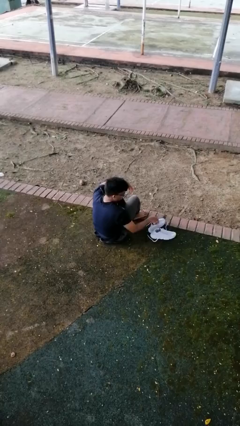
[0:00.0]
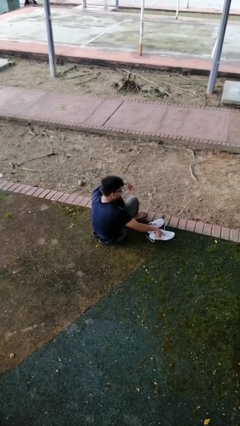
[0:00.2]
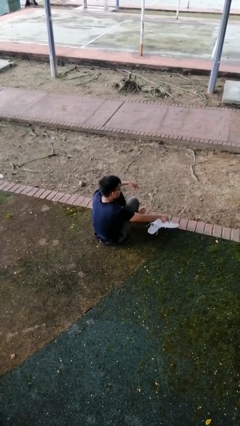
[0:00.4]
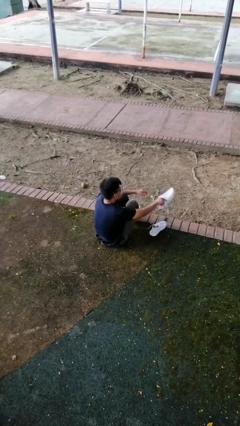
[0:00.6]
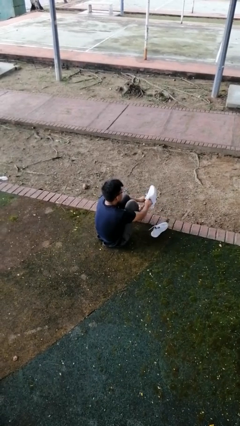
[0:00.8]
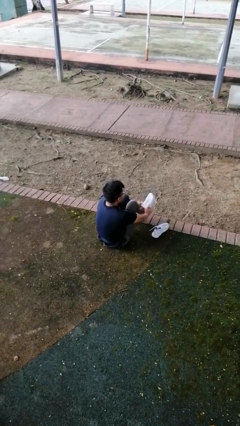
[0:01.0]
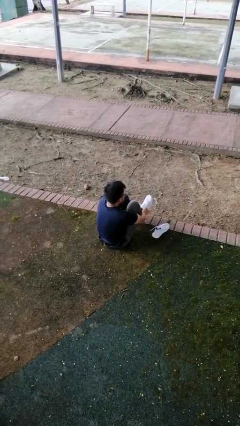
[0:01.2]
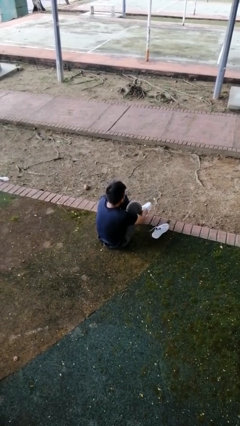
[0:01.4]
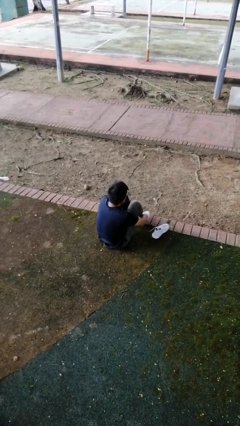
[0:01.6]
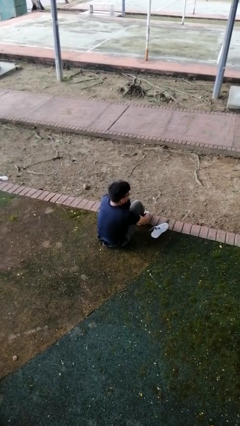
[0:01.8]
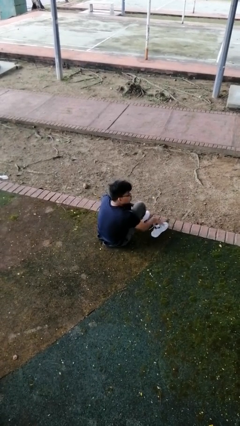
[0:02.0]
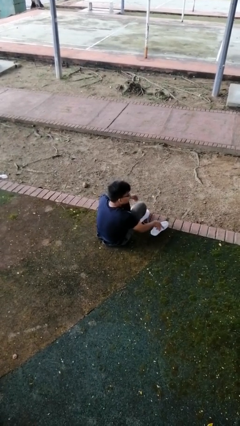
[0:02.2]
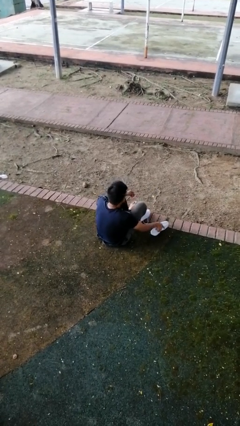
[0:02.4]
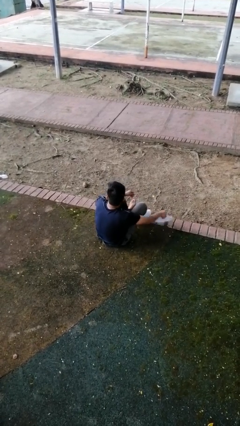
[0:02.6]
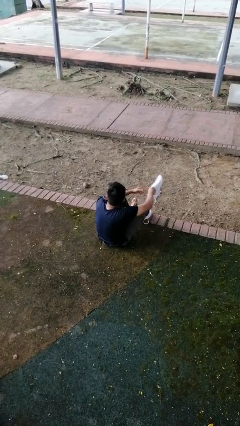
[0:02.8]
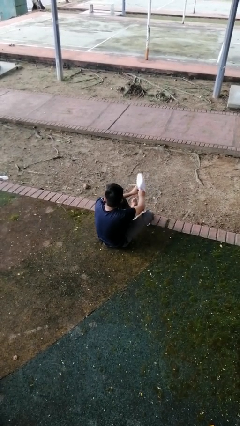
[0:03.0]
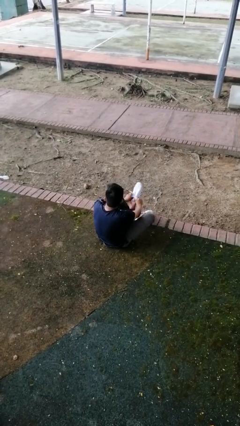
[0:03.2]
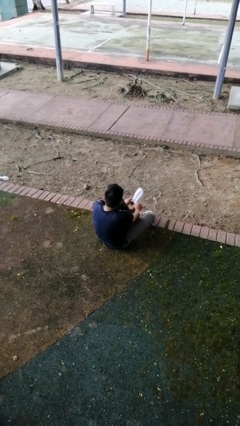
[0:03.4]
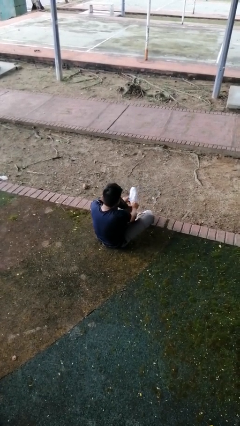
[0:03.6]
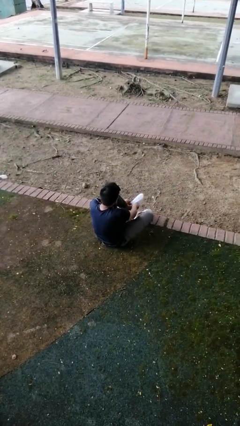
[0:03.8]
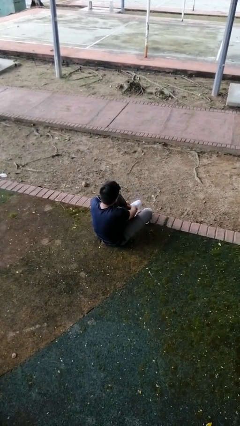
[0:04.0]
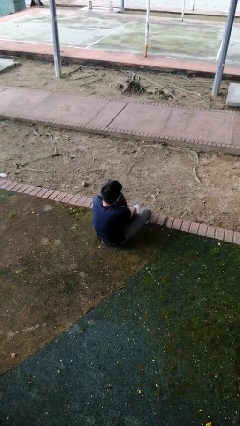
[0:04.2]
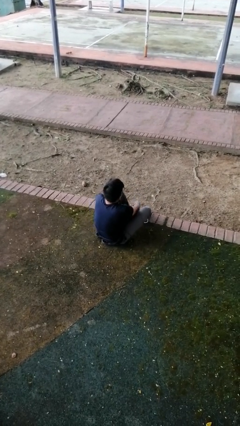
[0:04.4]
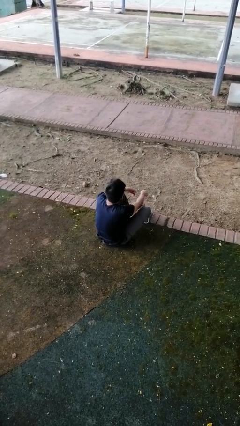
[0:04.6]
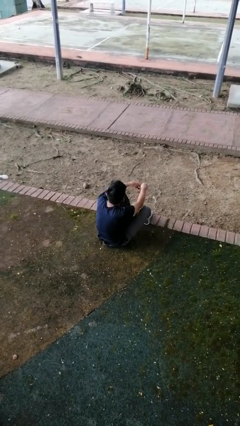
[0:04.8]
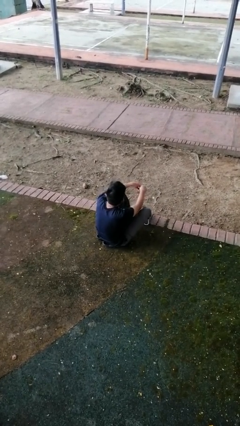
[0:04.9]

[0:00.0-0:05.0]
person puts on shoes

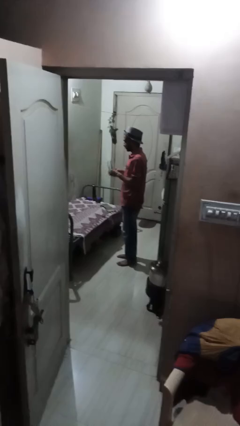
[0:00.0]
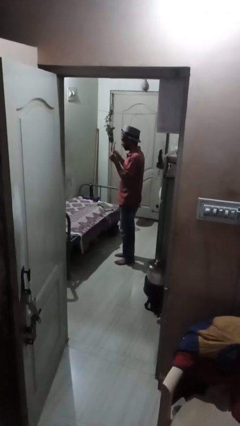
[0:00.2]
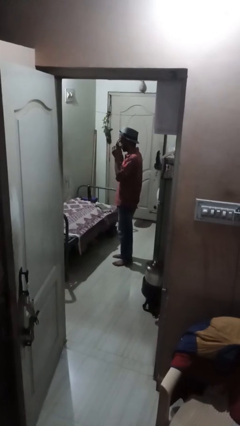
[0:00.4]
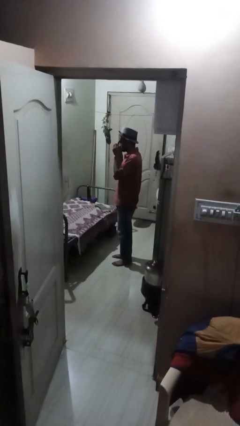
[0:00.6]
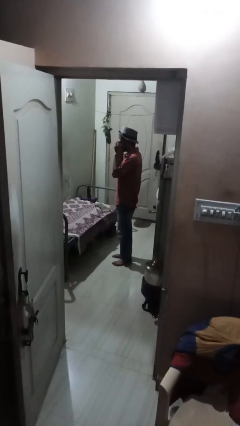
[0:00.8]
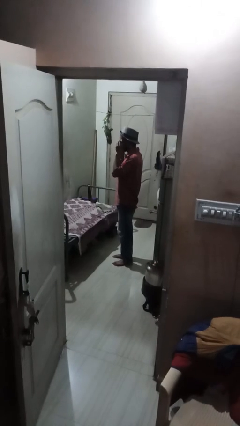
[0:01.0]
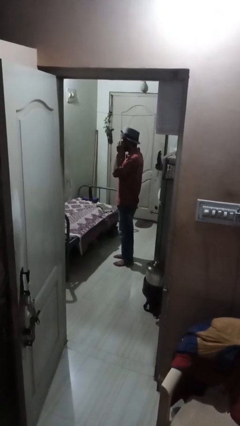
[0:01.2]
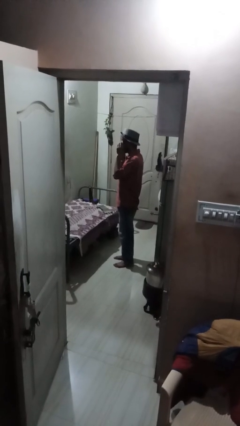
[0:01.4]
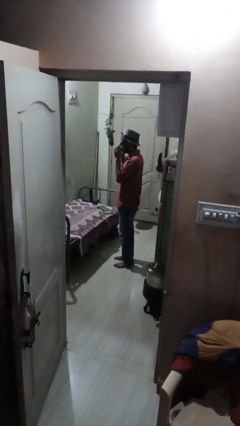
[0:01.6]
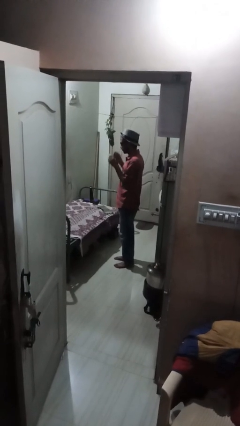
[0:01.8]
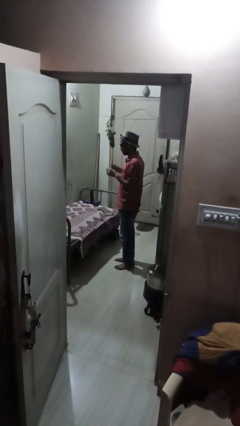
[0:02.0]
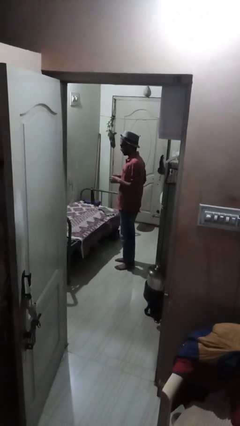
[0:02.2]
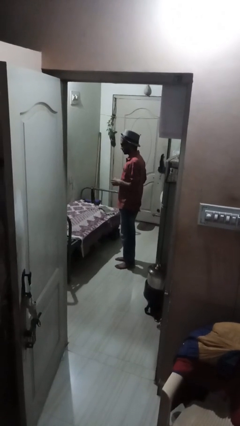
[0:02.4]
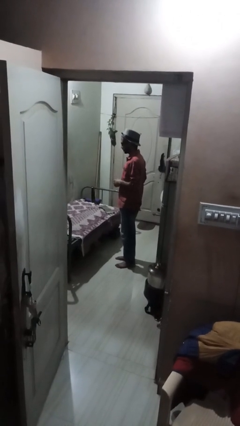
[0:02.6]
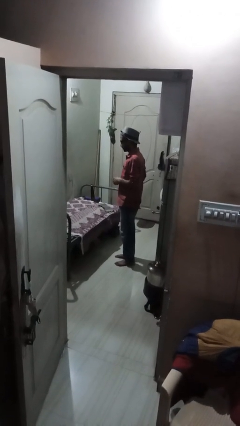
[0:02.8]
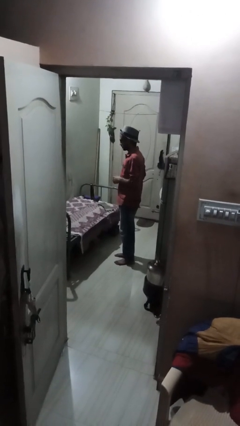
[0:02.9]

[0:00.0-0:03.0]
person puts on glasses

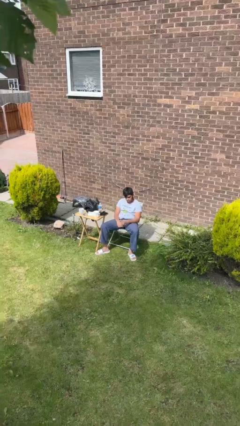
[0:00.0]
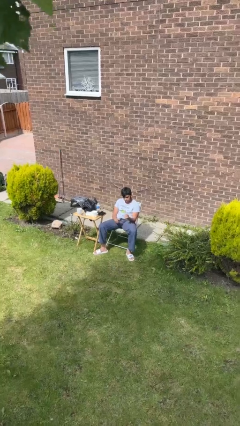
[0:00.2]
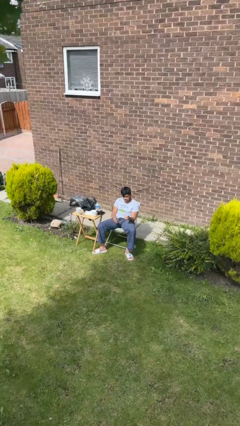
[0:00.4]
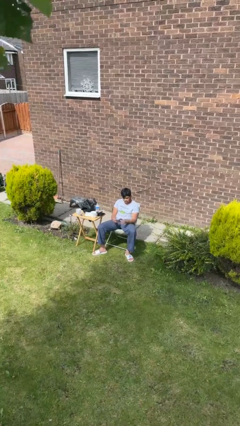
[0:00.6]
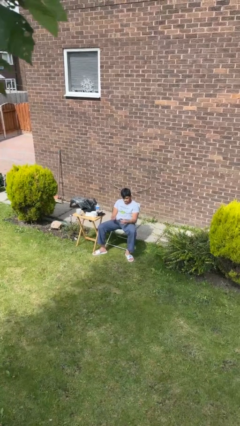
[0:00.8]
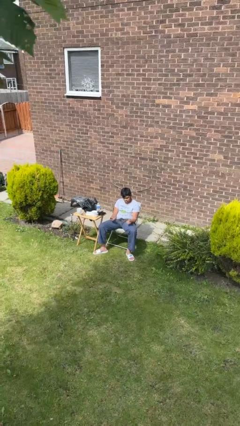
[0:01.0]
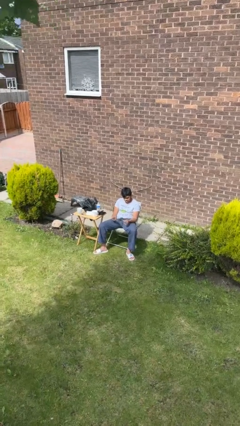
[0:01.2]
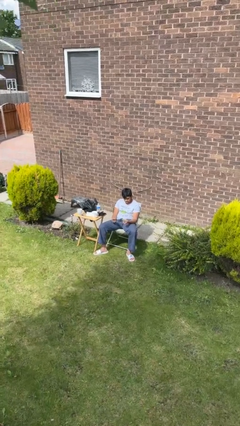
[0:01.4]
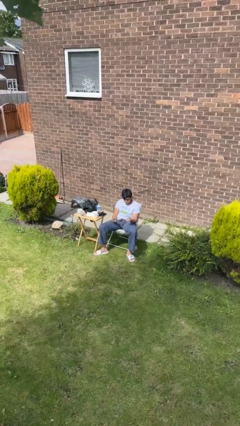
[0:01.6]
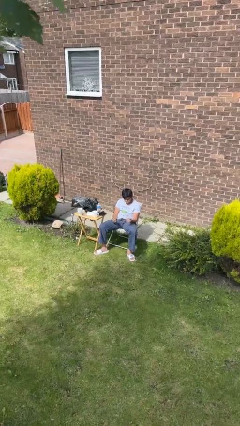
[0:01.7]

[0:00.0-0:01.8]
person snaps fingers

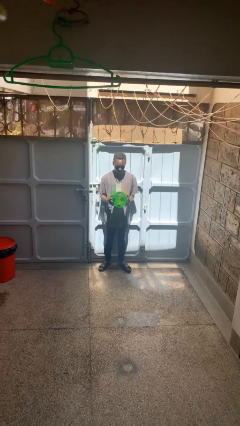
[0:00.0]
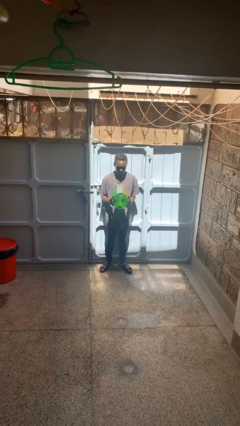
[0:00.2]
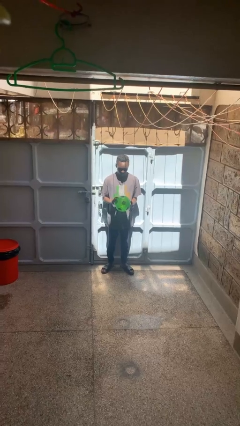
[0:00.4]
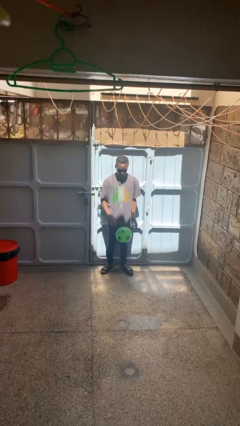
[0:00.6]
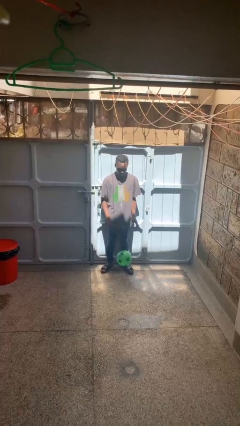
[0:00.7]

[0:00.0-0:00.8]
person bounces ball on floor

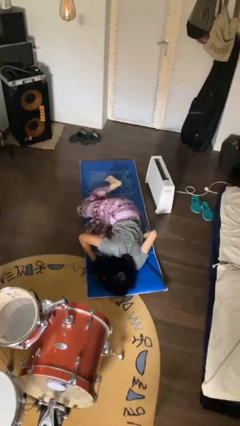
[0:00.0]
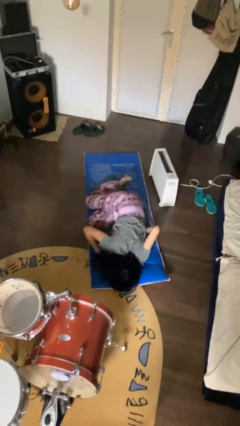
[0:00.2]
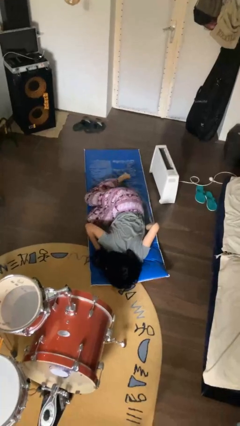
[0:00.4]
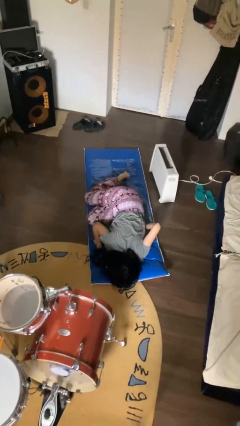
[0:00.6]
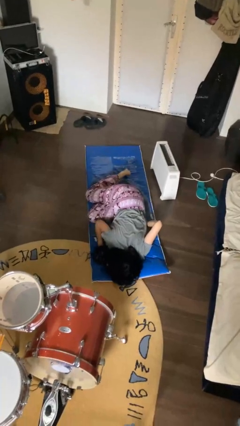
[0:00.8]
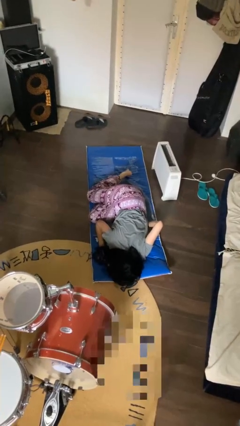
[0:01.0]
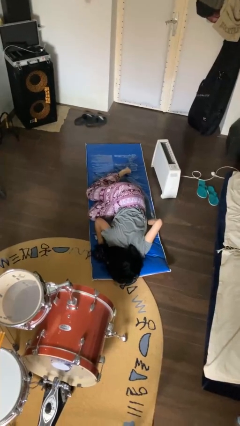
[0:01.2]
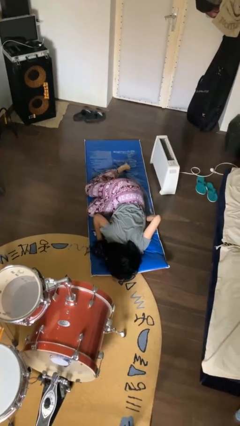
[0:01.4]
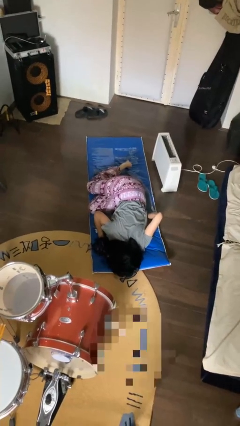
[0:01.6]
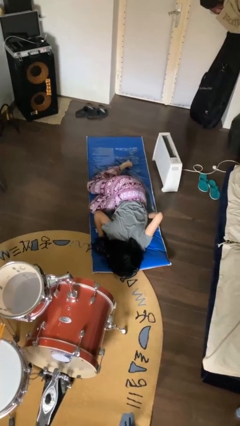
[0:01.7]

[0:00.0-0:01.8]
person lies down on floor

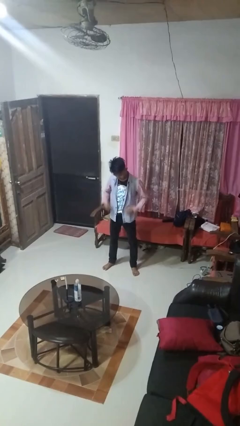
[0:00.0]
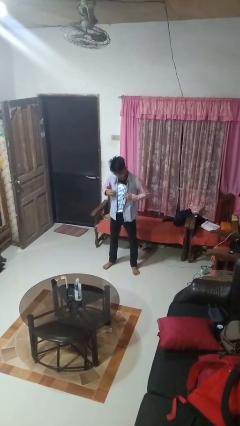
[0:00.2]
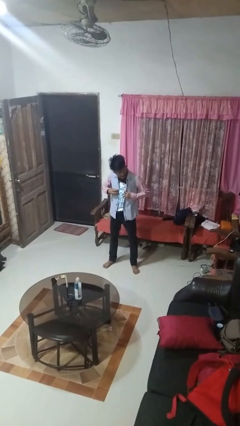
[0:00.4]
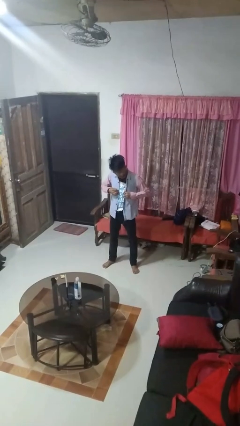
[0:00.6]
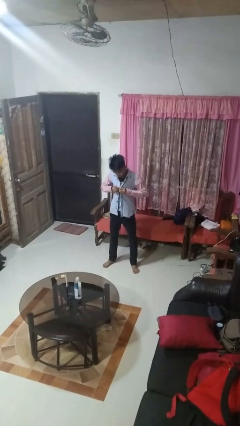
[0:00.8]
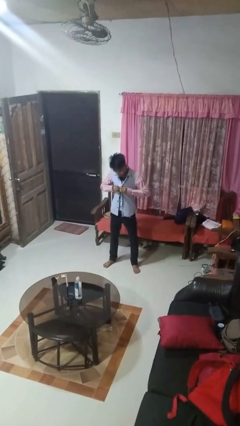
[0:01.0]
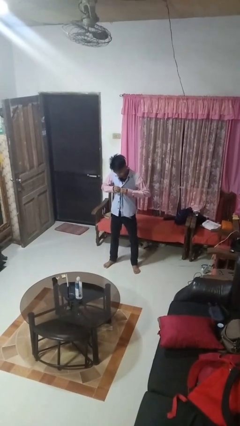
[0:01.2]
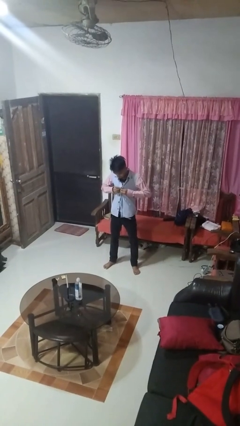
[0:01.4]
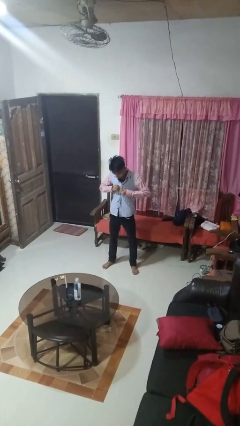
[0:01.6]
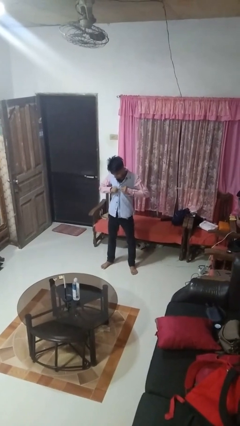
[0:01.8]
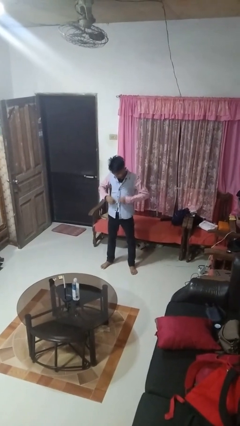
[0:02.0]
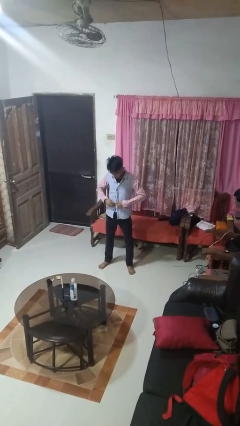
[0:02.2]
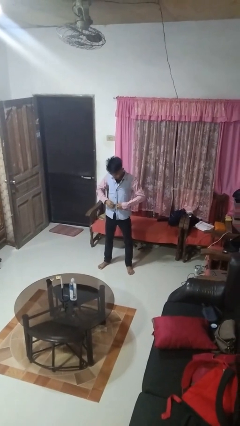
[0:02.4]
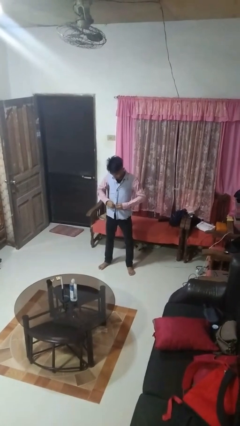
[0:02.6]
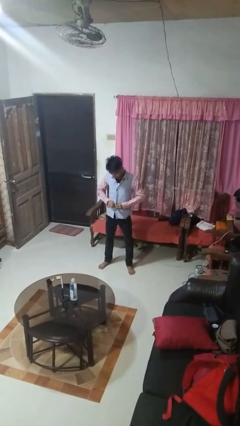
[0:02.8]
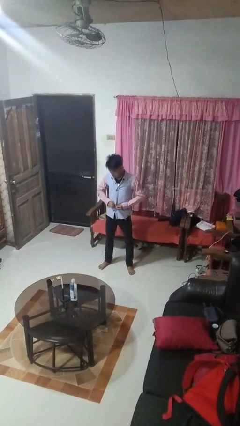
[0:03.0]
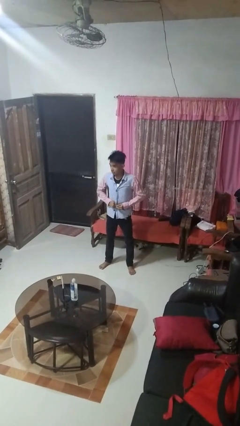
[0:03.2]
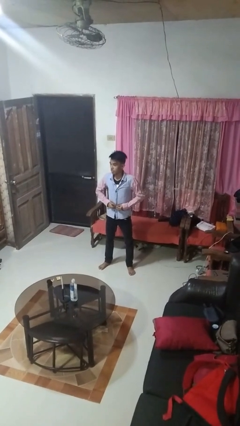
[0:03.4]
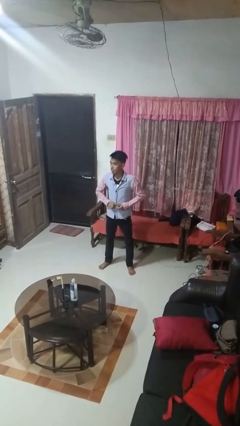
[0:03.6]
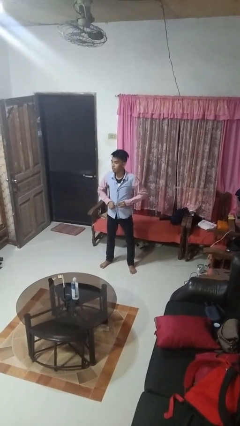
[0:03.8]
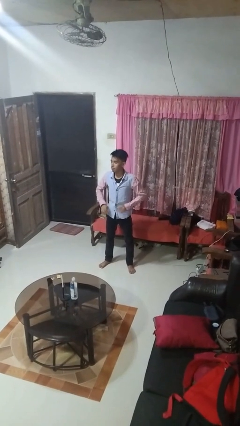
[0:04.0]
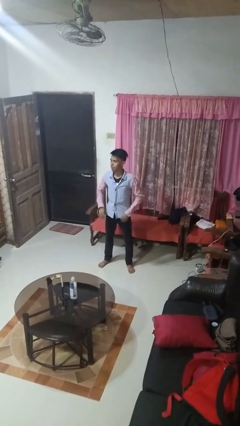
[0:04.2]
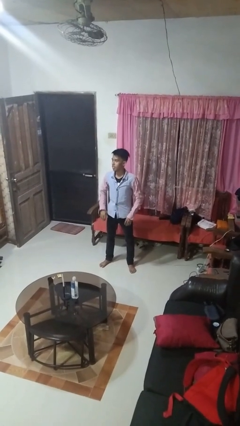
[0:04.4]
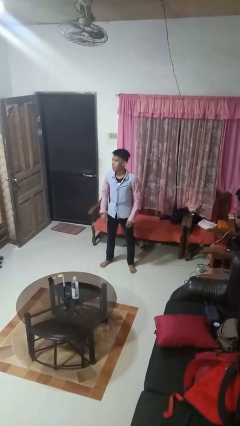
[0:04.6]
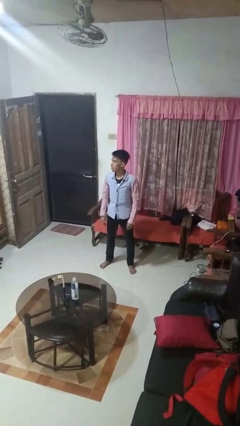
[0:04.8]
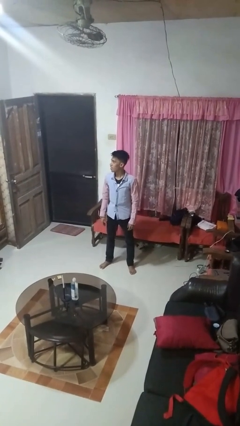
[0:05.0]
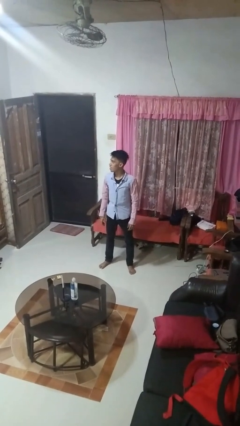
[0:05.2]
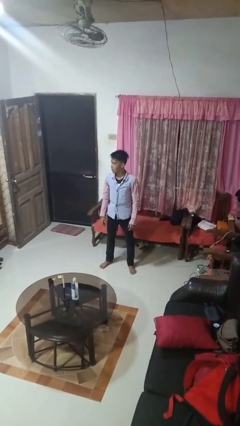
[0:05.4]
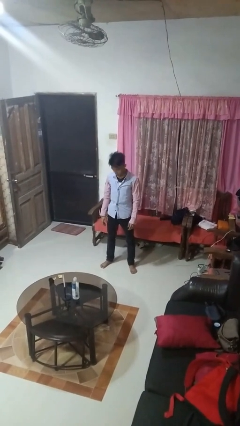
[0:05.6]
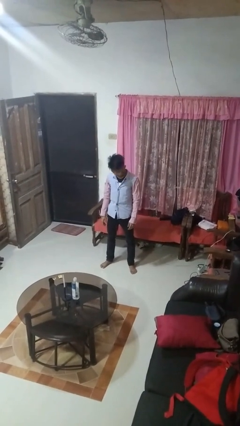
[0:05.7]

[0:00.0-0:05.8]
person buttons shirt
